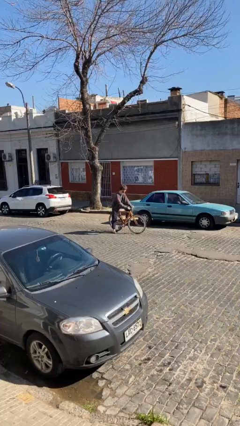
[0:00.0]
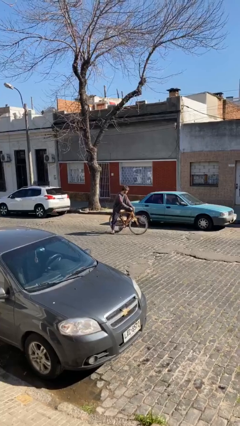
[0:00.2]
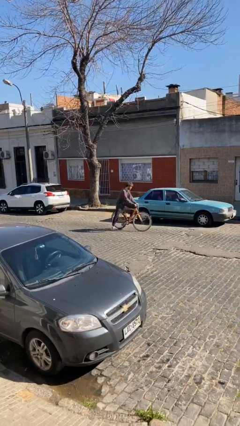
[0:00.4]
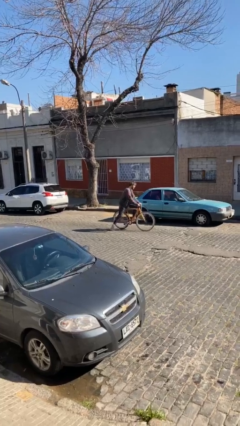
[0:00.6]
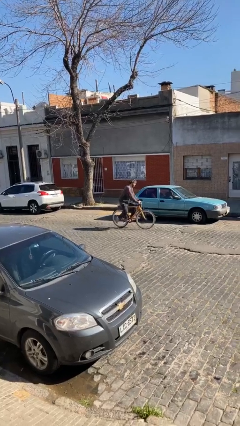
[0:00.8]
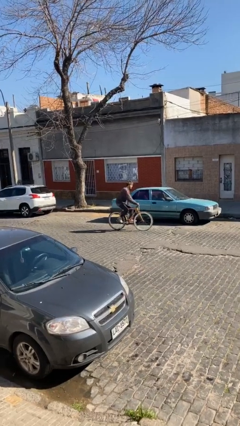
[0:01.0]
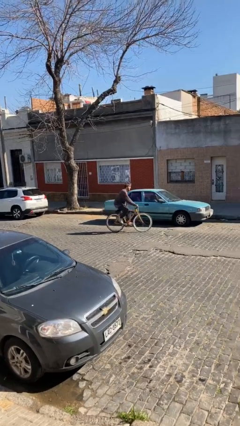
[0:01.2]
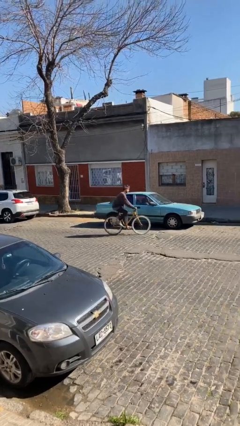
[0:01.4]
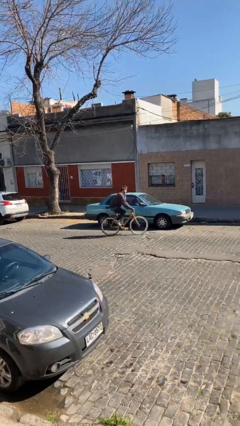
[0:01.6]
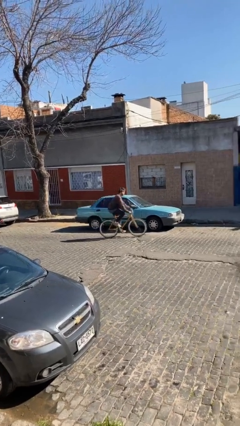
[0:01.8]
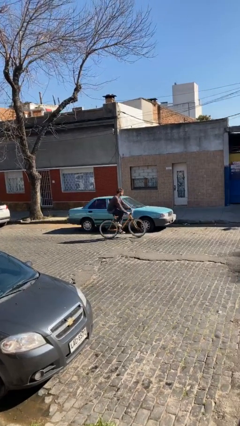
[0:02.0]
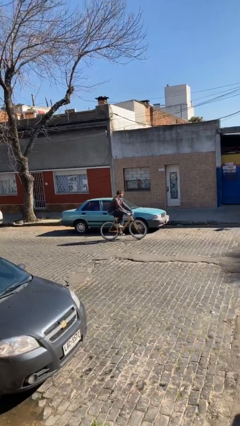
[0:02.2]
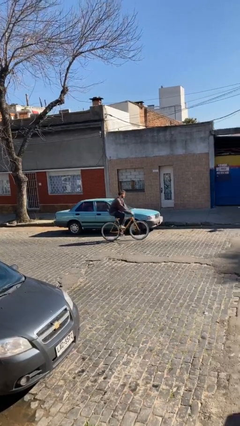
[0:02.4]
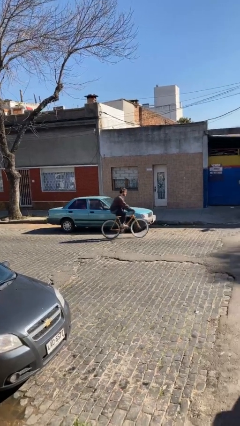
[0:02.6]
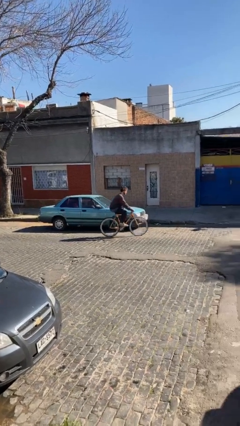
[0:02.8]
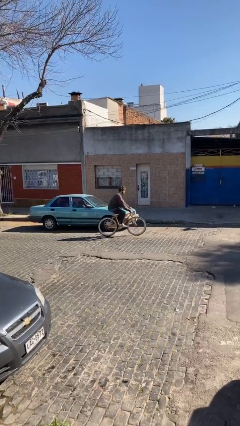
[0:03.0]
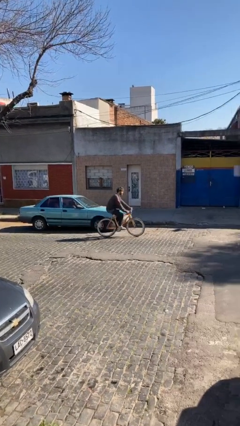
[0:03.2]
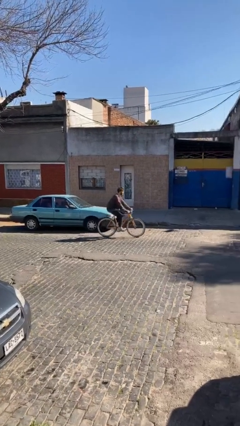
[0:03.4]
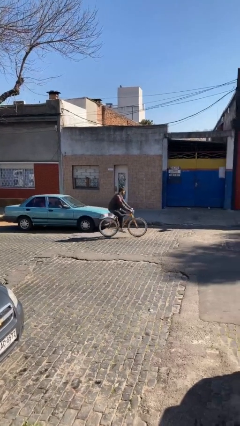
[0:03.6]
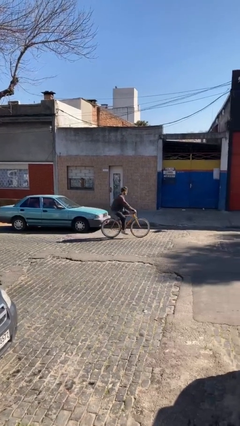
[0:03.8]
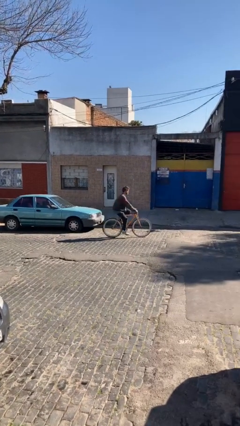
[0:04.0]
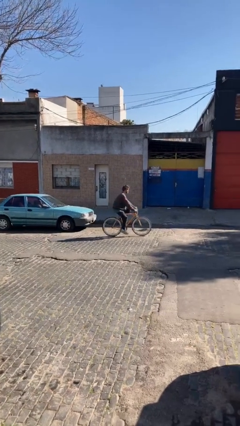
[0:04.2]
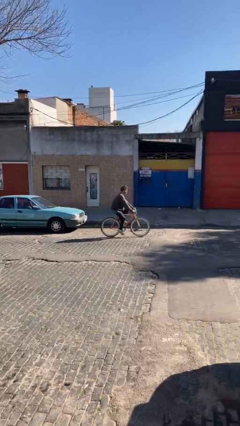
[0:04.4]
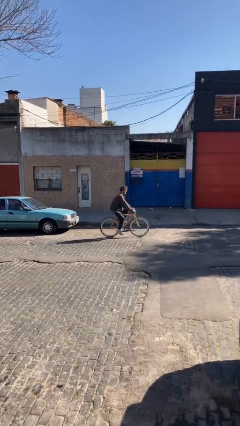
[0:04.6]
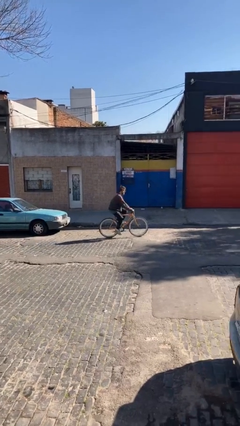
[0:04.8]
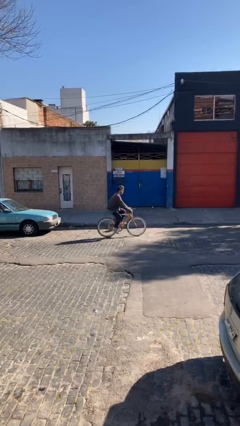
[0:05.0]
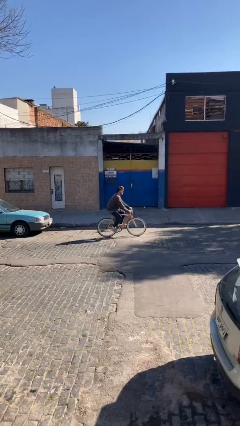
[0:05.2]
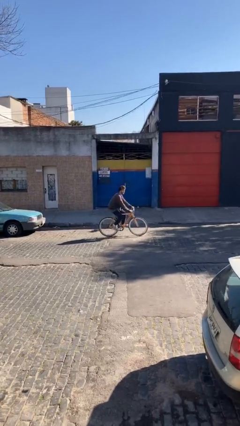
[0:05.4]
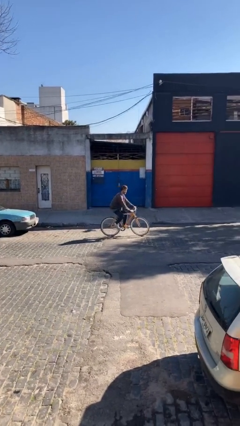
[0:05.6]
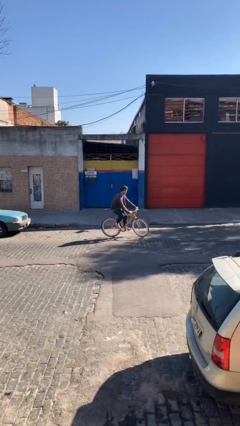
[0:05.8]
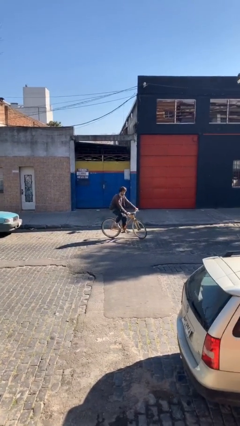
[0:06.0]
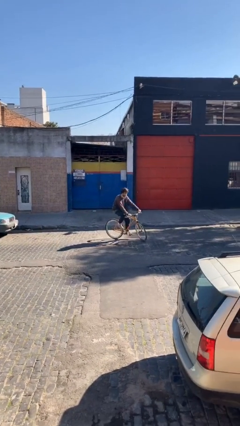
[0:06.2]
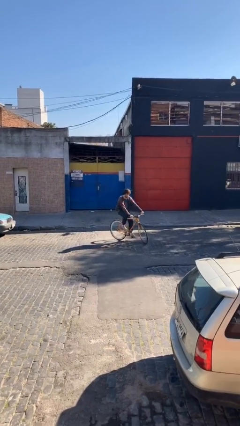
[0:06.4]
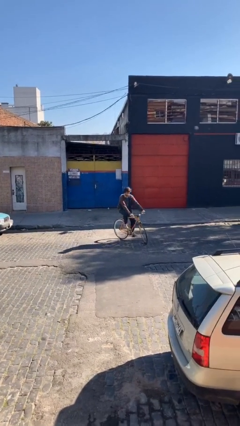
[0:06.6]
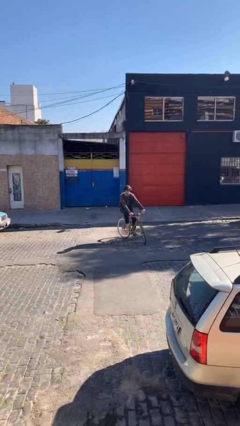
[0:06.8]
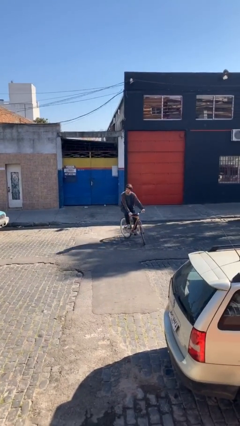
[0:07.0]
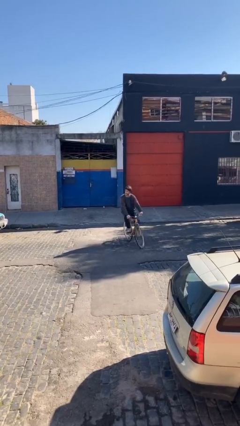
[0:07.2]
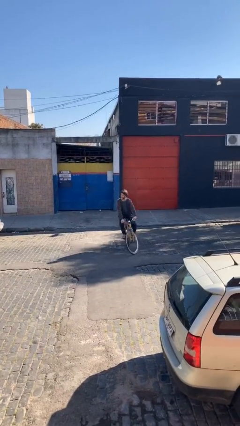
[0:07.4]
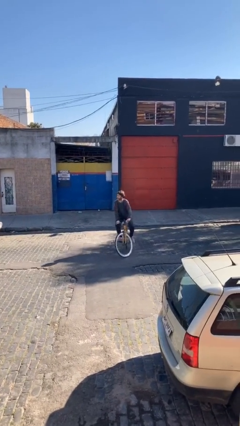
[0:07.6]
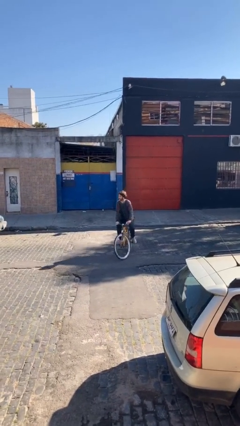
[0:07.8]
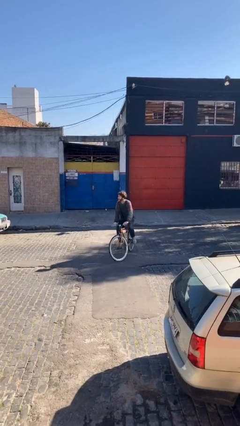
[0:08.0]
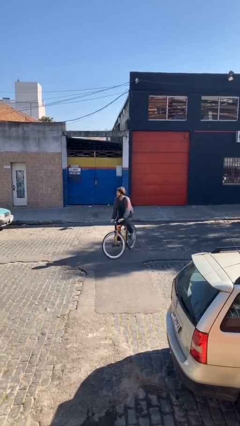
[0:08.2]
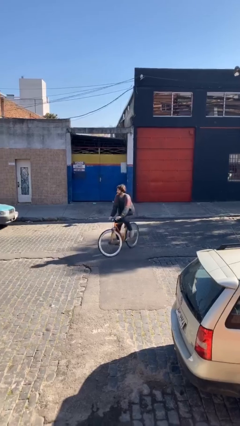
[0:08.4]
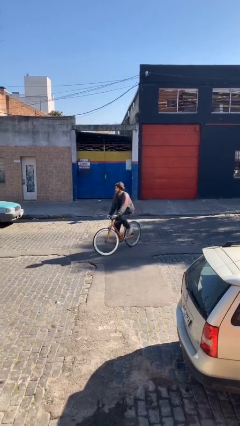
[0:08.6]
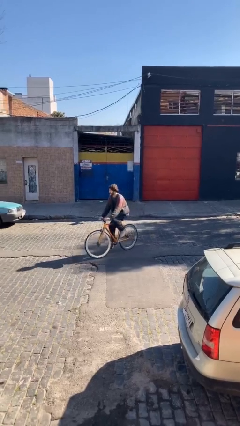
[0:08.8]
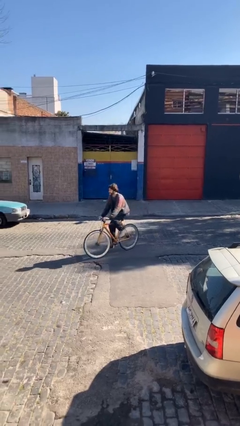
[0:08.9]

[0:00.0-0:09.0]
person rides bicycle

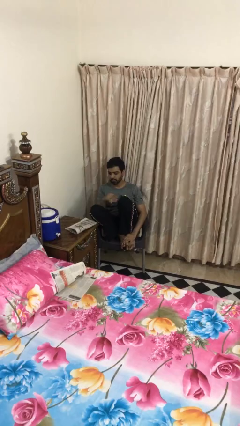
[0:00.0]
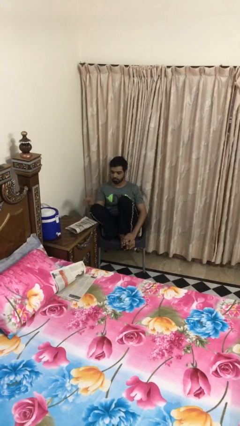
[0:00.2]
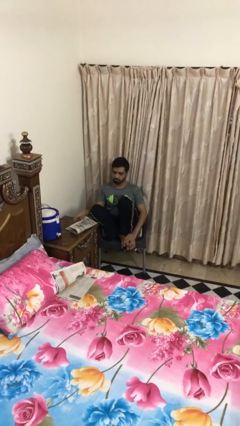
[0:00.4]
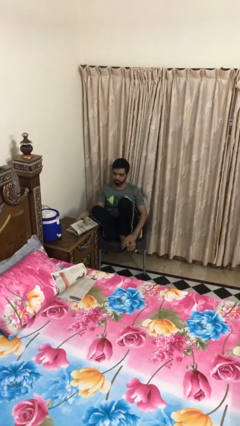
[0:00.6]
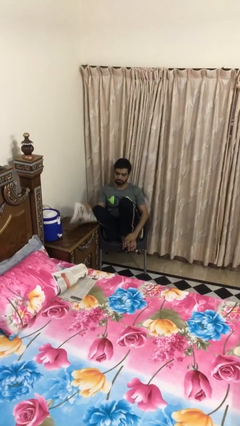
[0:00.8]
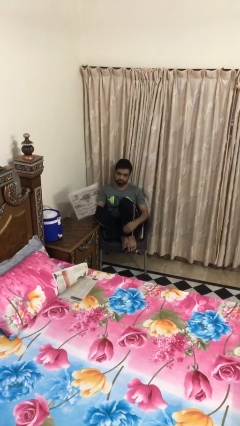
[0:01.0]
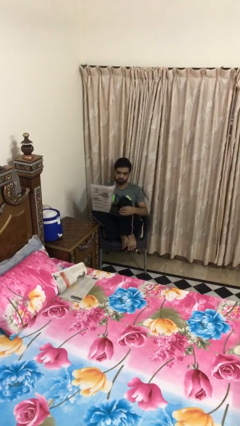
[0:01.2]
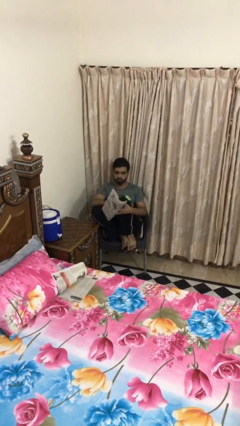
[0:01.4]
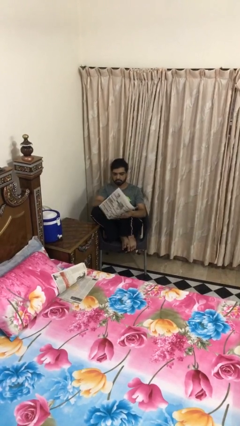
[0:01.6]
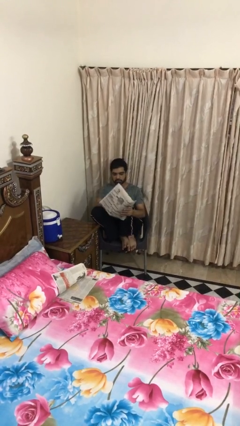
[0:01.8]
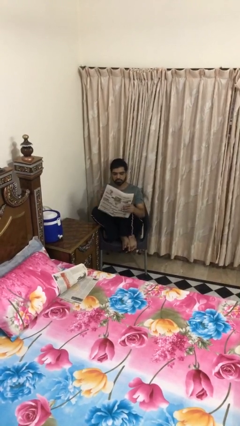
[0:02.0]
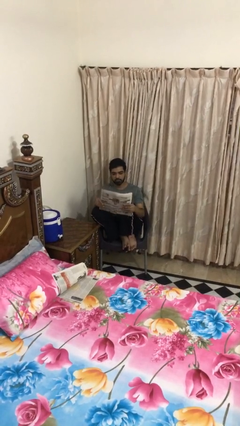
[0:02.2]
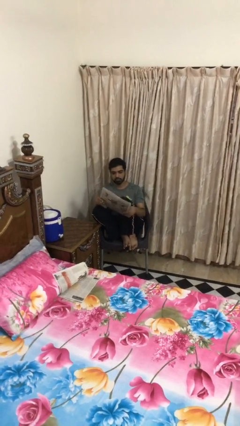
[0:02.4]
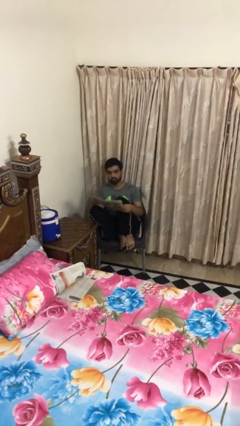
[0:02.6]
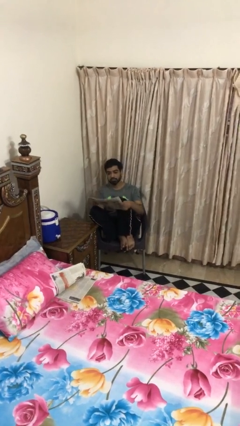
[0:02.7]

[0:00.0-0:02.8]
person picks up object from table

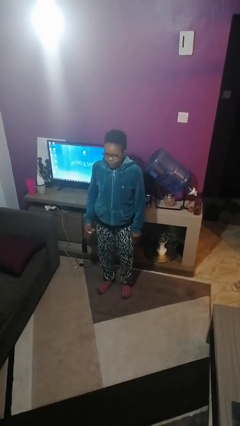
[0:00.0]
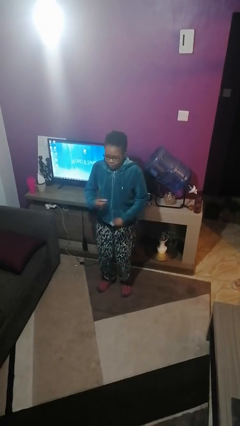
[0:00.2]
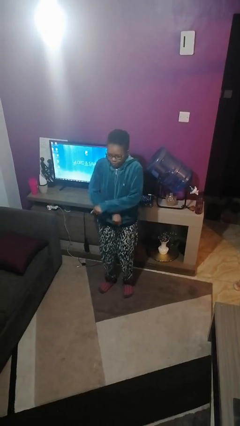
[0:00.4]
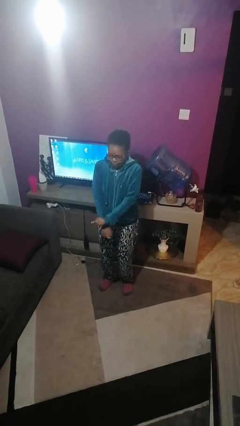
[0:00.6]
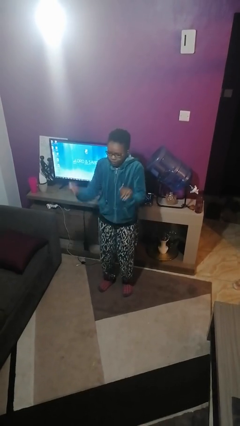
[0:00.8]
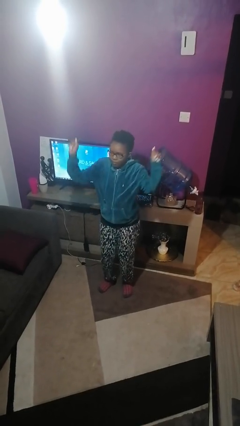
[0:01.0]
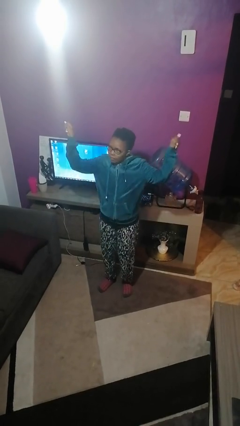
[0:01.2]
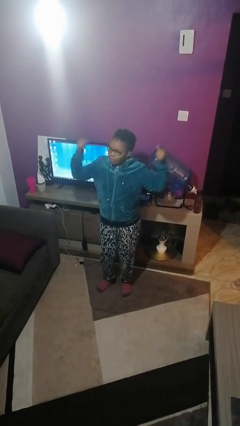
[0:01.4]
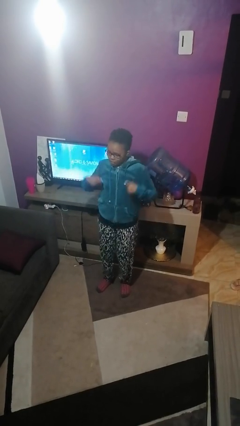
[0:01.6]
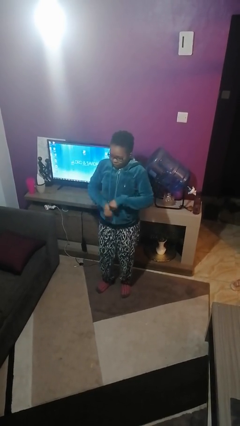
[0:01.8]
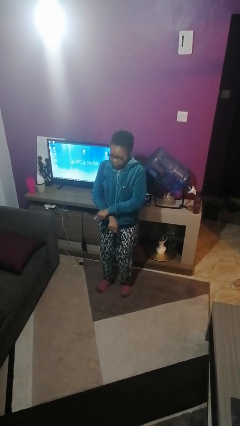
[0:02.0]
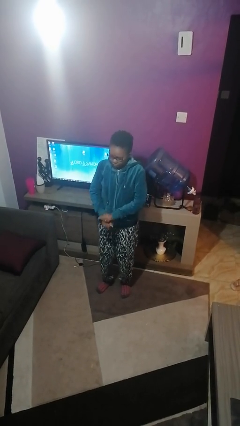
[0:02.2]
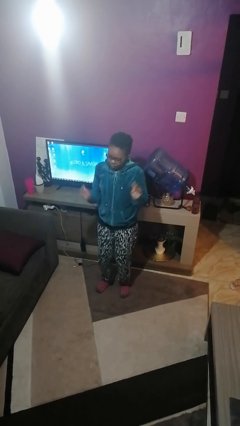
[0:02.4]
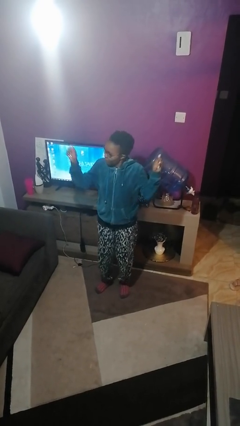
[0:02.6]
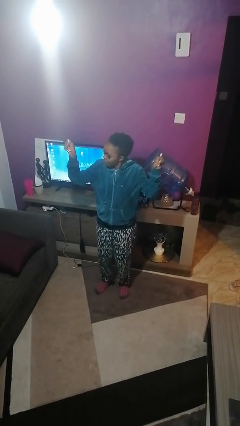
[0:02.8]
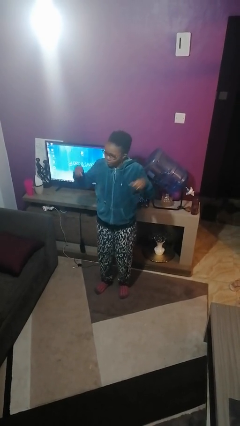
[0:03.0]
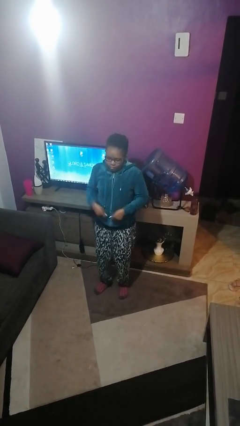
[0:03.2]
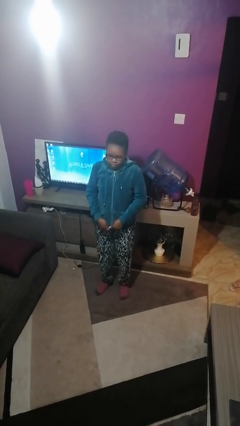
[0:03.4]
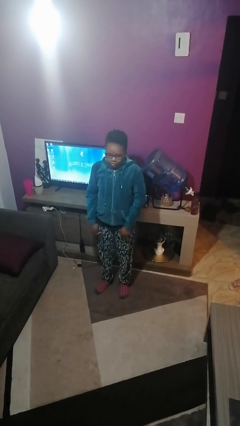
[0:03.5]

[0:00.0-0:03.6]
person dances in place

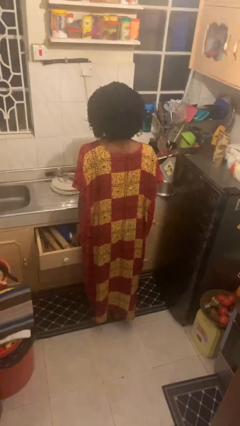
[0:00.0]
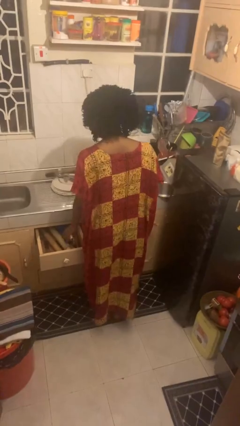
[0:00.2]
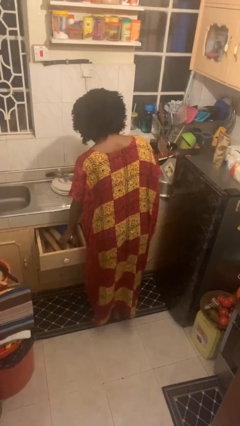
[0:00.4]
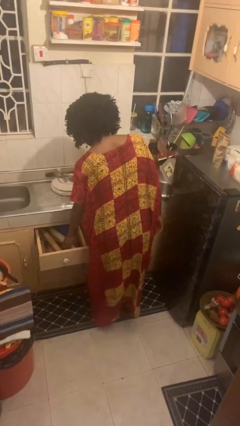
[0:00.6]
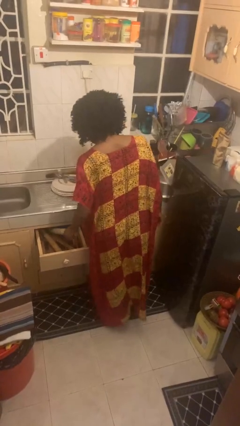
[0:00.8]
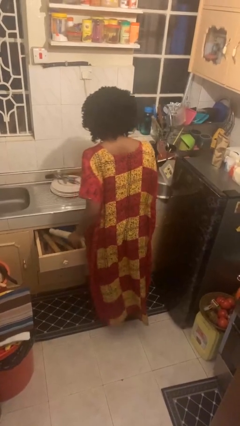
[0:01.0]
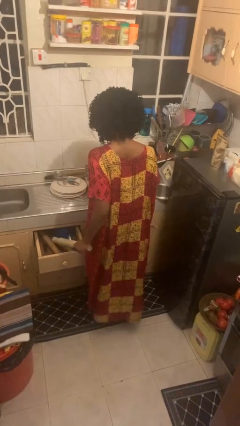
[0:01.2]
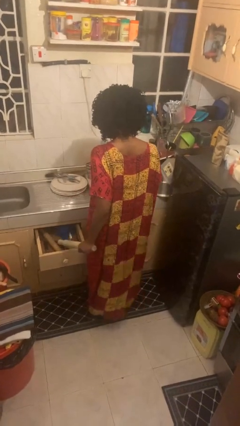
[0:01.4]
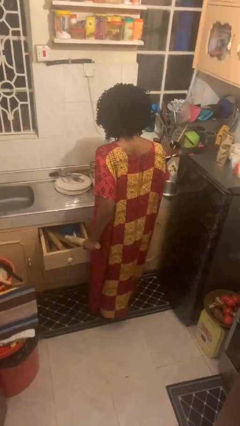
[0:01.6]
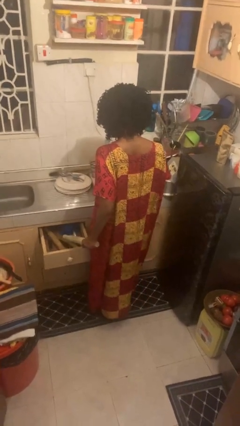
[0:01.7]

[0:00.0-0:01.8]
person takes object from kitchen drawer

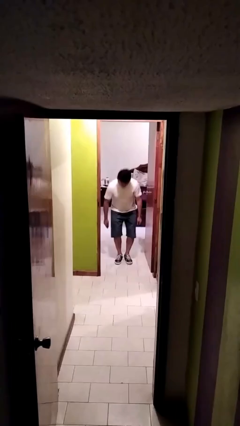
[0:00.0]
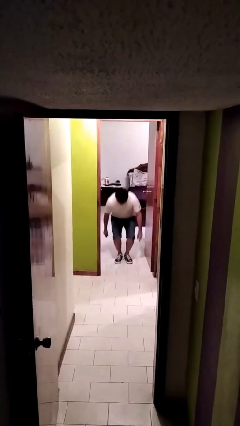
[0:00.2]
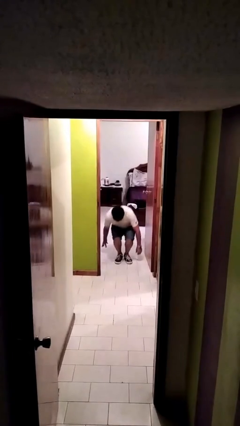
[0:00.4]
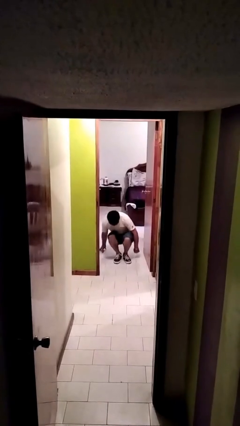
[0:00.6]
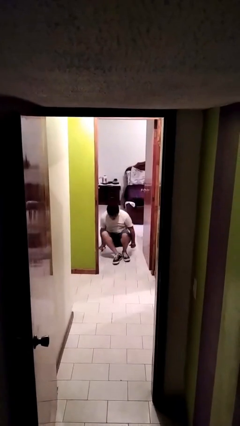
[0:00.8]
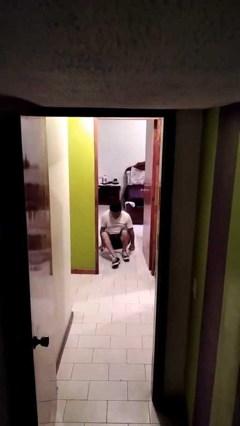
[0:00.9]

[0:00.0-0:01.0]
person sits down
